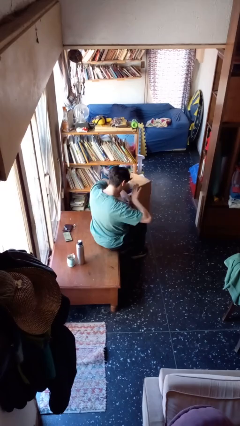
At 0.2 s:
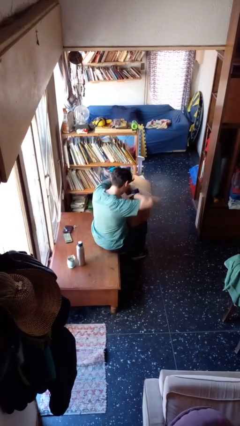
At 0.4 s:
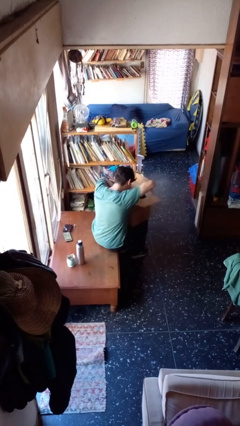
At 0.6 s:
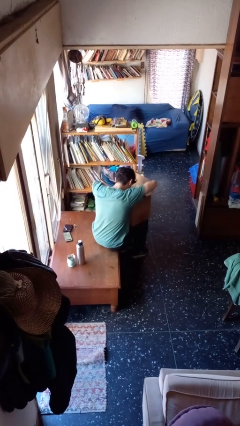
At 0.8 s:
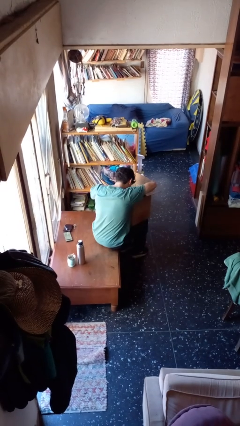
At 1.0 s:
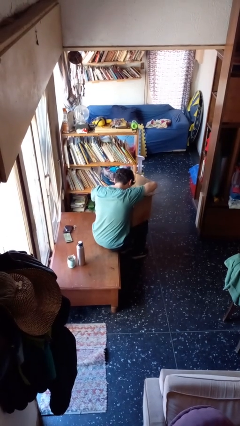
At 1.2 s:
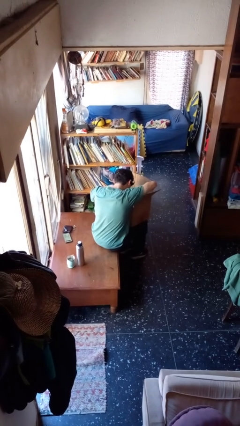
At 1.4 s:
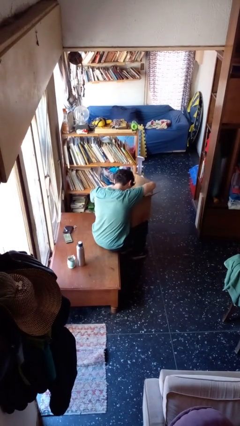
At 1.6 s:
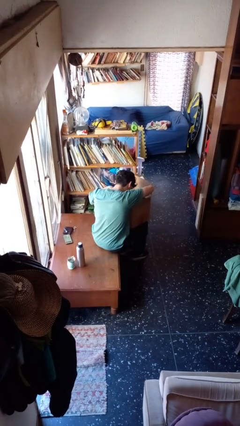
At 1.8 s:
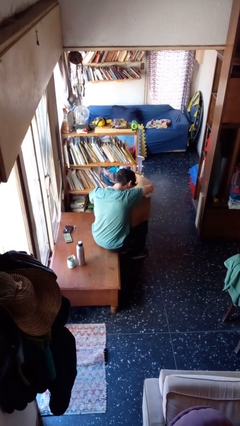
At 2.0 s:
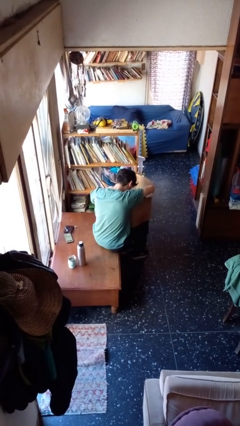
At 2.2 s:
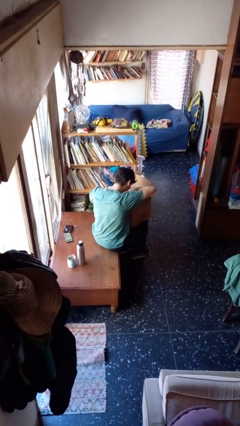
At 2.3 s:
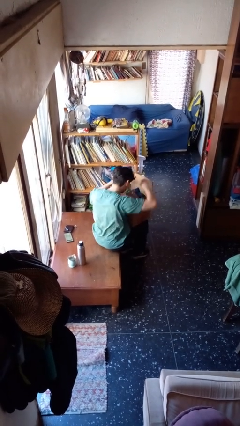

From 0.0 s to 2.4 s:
person searches in box

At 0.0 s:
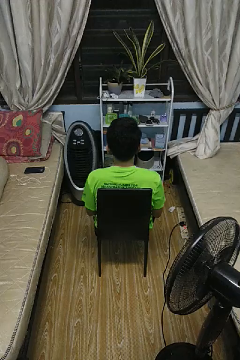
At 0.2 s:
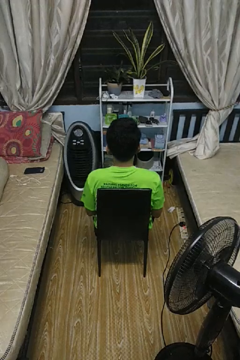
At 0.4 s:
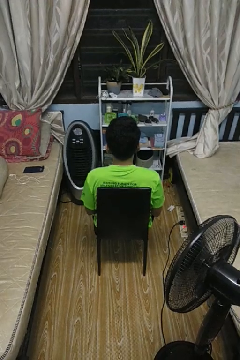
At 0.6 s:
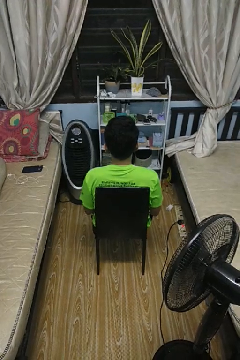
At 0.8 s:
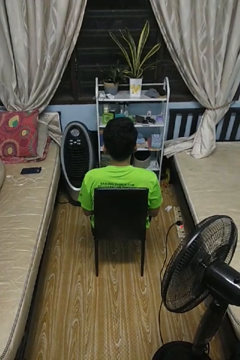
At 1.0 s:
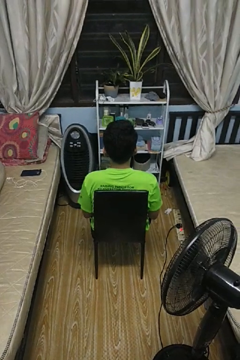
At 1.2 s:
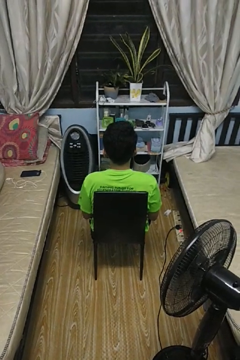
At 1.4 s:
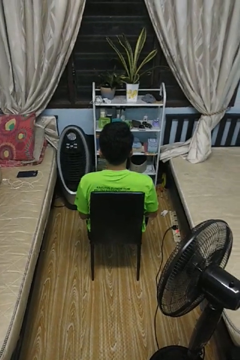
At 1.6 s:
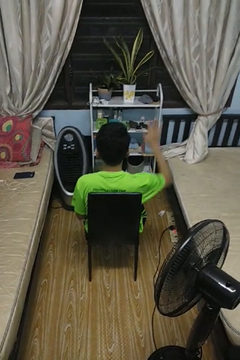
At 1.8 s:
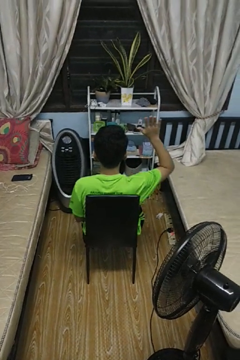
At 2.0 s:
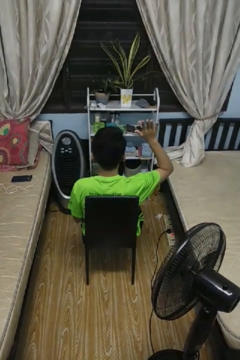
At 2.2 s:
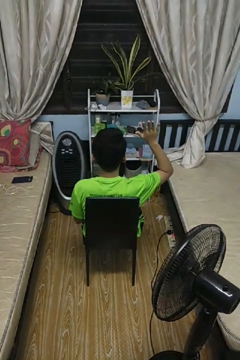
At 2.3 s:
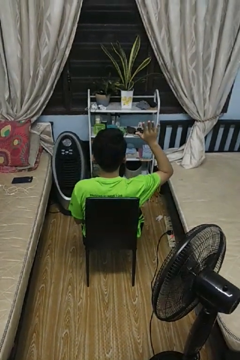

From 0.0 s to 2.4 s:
person gestures number five

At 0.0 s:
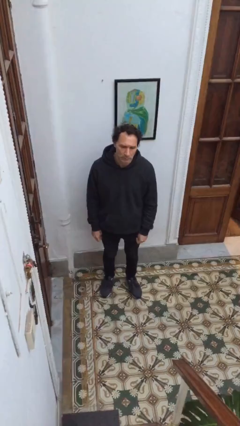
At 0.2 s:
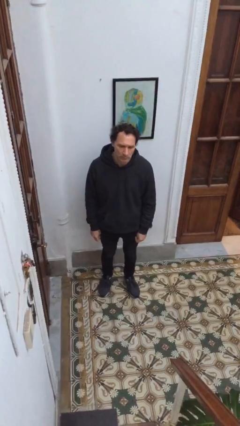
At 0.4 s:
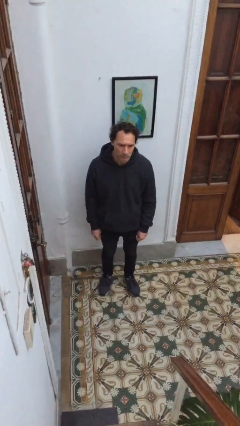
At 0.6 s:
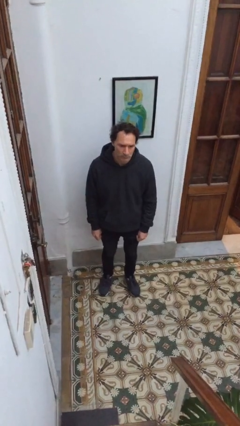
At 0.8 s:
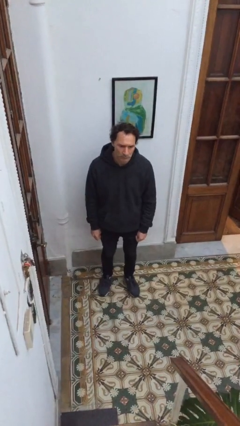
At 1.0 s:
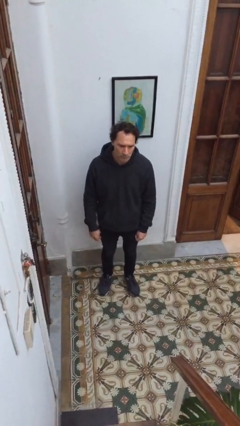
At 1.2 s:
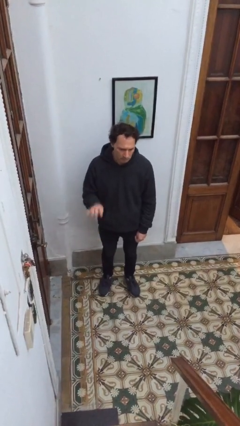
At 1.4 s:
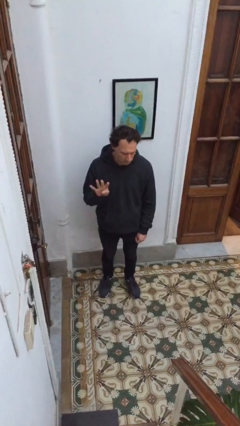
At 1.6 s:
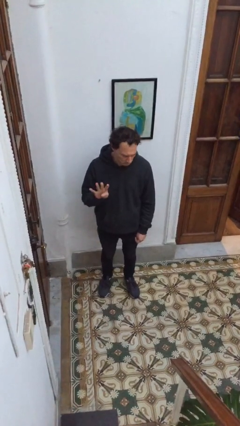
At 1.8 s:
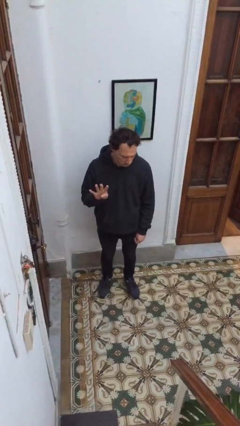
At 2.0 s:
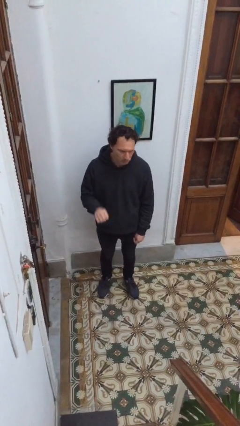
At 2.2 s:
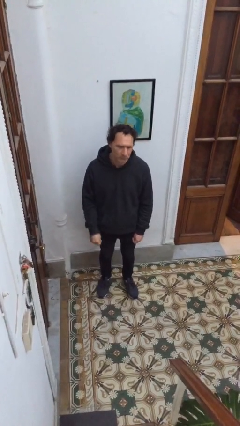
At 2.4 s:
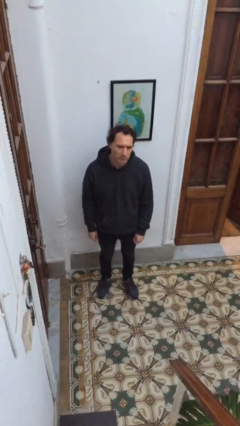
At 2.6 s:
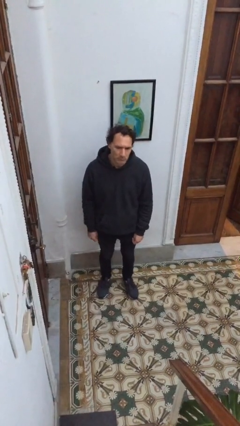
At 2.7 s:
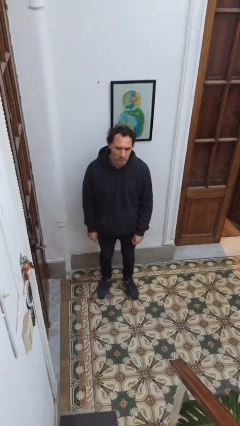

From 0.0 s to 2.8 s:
person gestures number four

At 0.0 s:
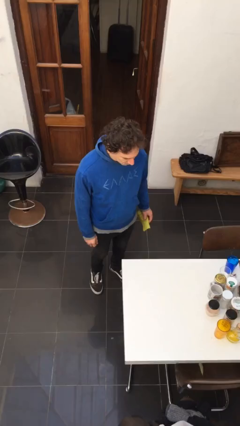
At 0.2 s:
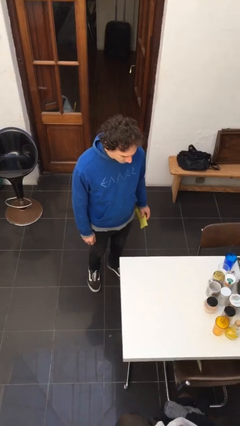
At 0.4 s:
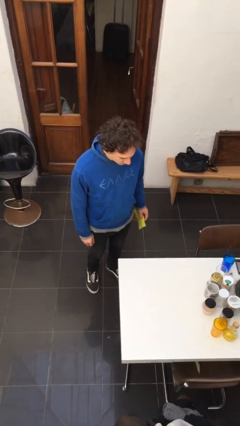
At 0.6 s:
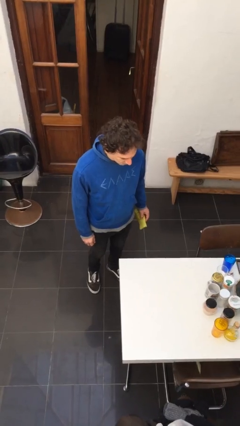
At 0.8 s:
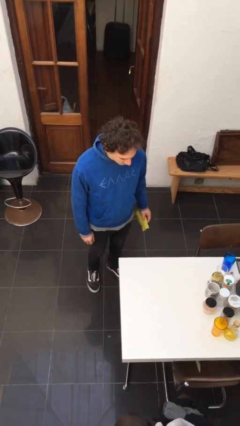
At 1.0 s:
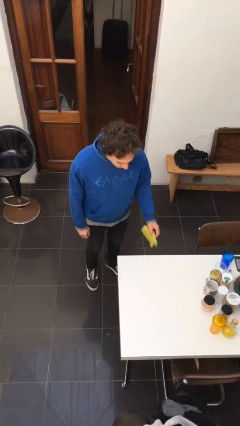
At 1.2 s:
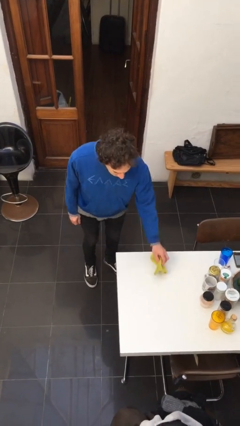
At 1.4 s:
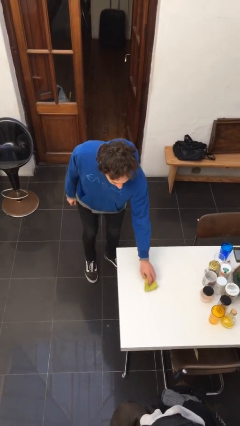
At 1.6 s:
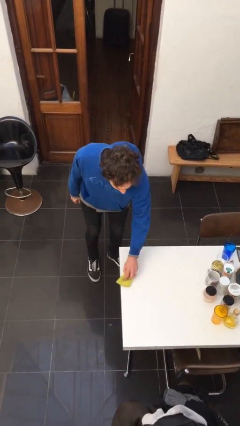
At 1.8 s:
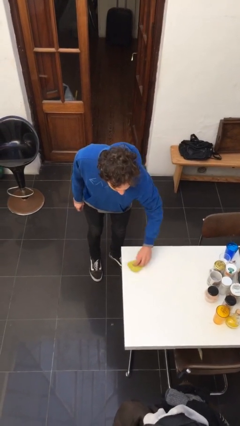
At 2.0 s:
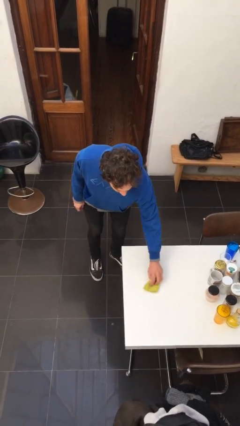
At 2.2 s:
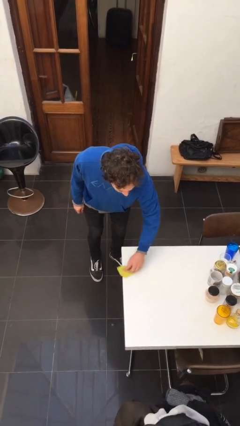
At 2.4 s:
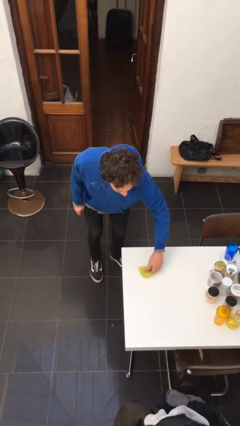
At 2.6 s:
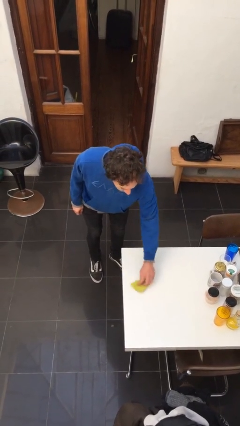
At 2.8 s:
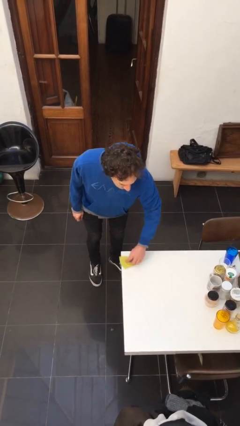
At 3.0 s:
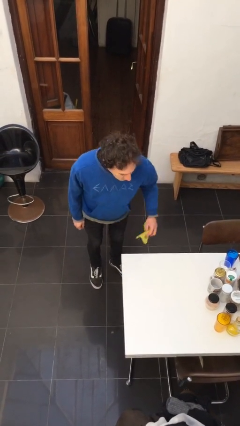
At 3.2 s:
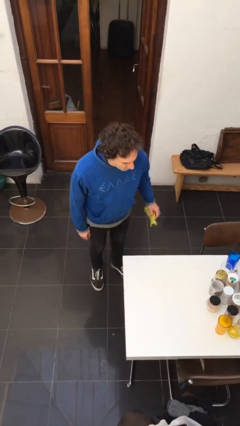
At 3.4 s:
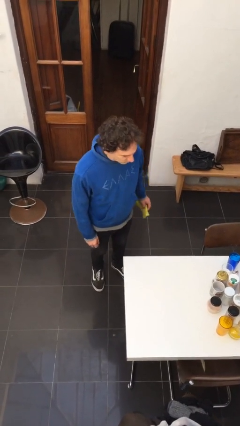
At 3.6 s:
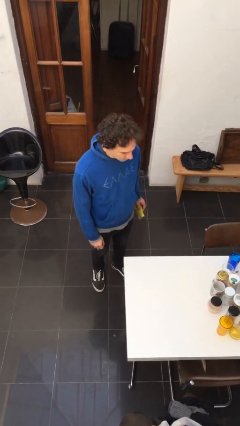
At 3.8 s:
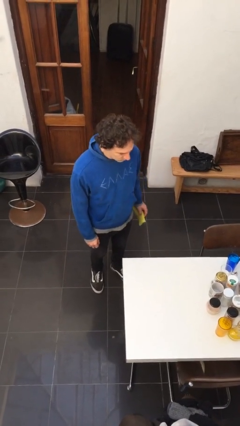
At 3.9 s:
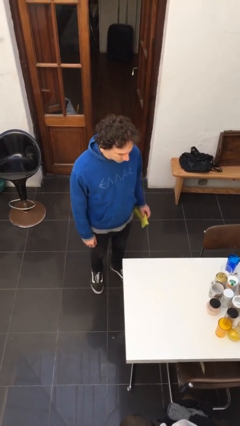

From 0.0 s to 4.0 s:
person cleans table with rag

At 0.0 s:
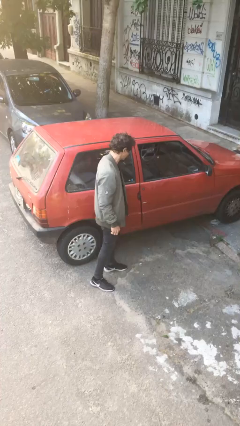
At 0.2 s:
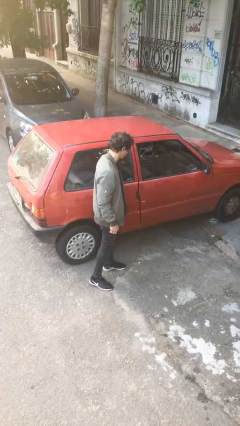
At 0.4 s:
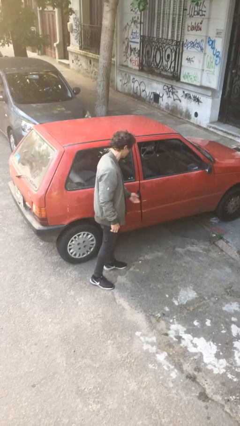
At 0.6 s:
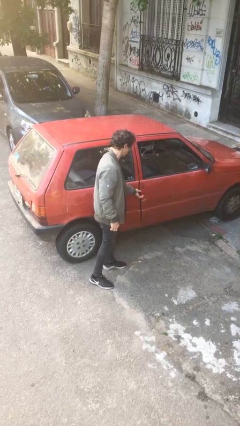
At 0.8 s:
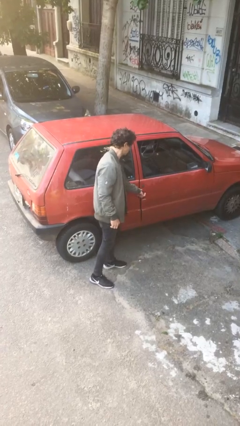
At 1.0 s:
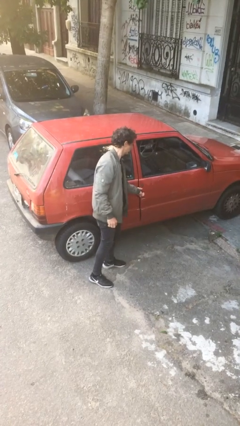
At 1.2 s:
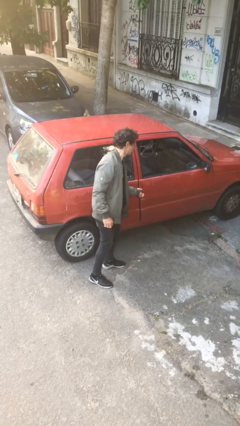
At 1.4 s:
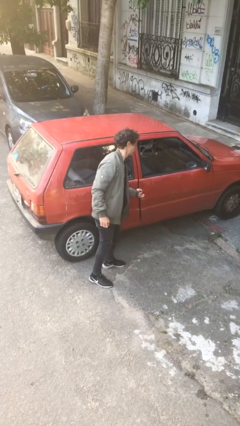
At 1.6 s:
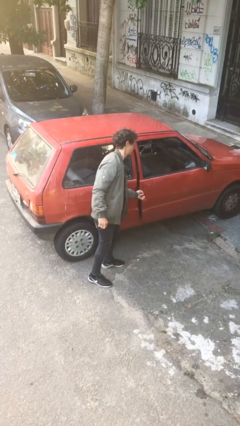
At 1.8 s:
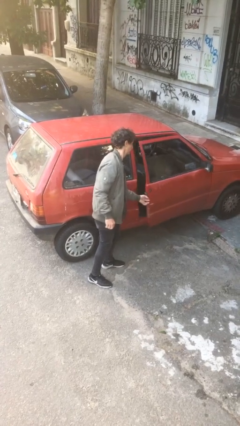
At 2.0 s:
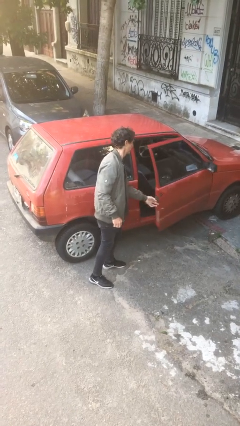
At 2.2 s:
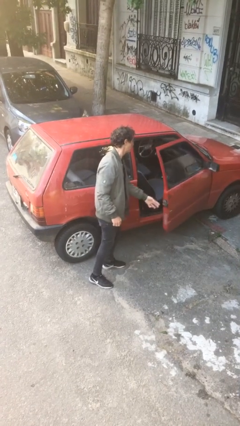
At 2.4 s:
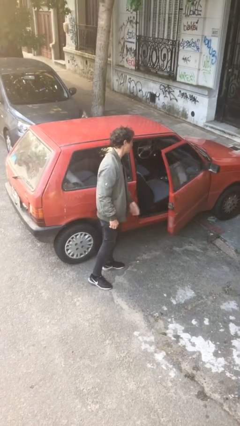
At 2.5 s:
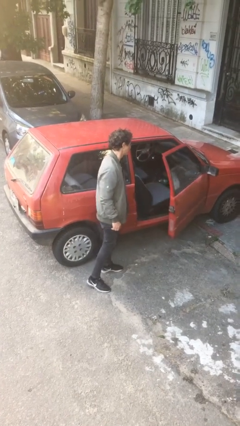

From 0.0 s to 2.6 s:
person opens car door

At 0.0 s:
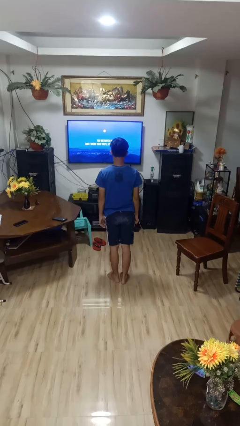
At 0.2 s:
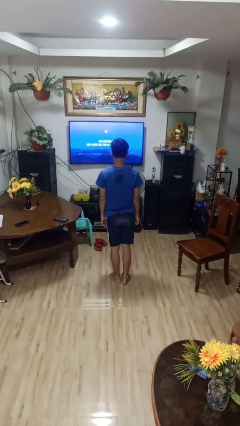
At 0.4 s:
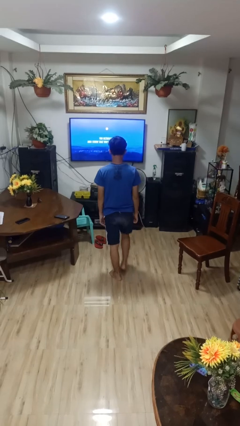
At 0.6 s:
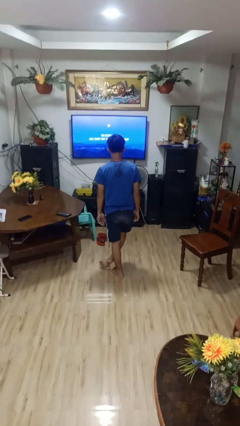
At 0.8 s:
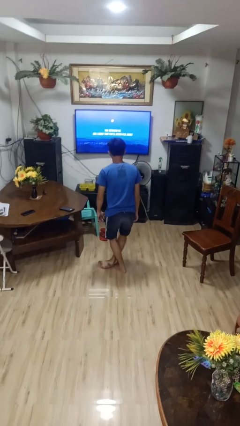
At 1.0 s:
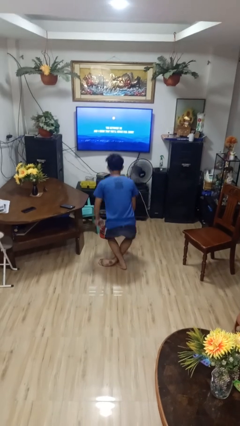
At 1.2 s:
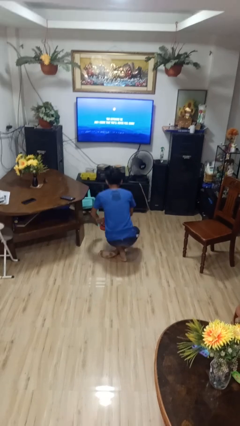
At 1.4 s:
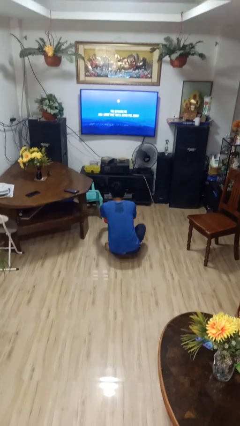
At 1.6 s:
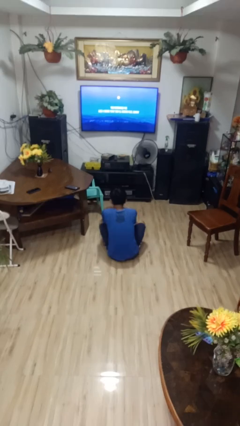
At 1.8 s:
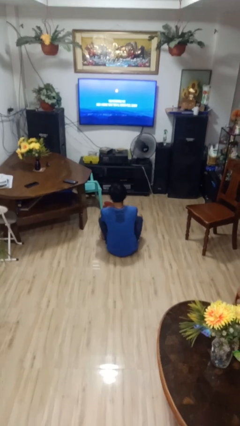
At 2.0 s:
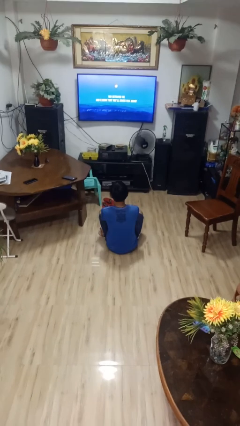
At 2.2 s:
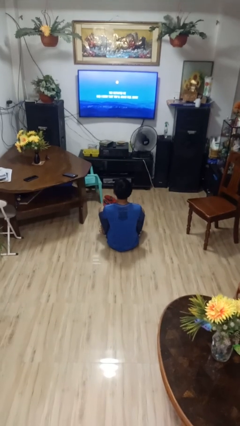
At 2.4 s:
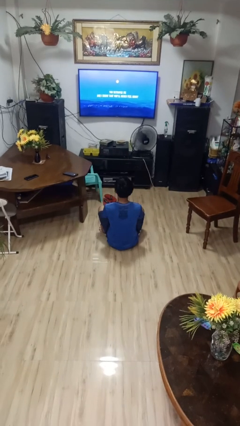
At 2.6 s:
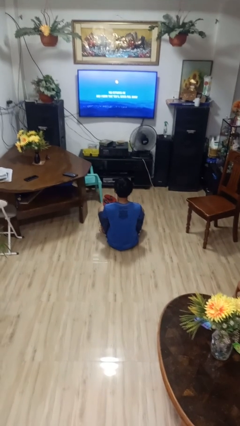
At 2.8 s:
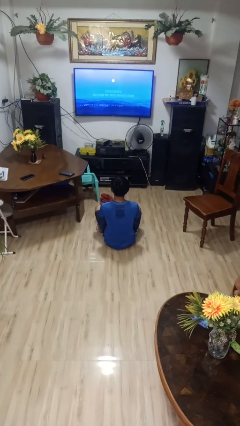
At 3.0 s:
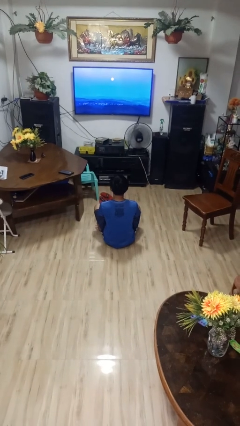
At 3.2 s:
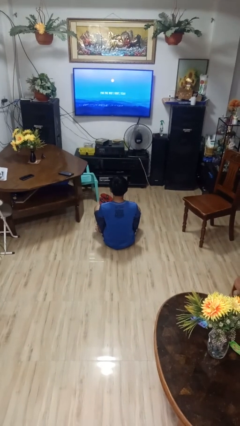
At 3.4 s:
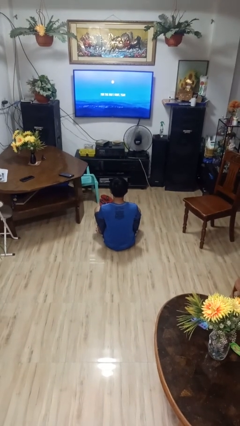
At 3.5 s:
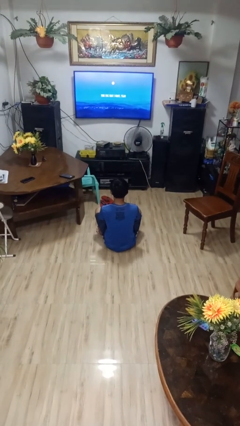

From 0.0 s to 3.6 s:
person sits crisscross
